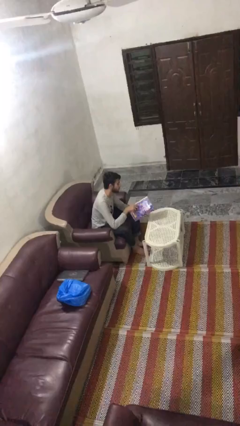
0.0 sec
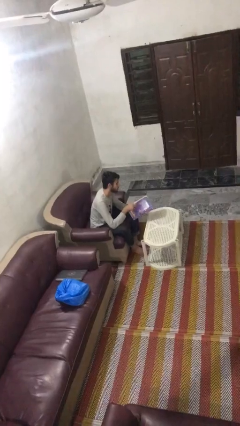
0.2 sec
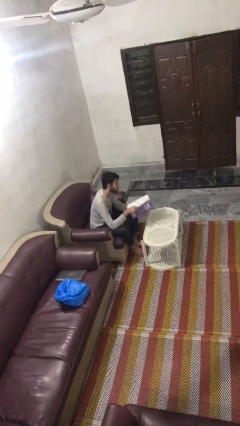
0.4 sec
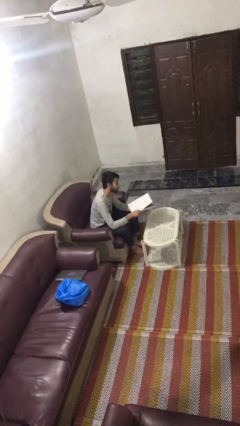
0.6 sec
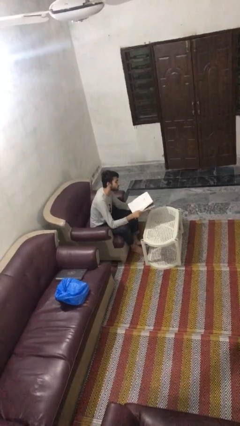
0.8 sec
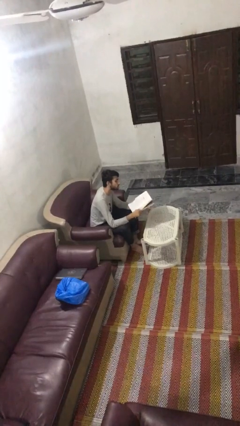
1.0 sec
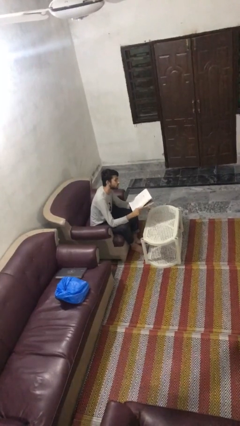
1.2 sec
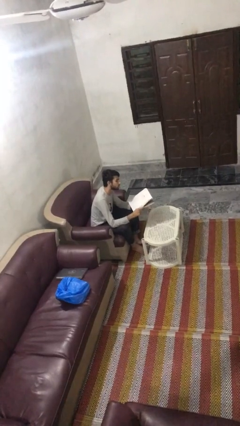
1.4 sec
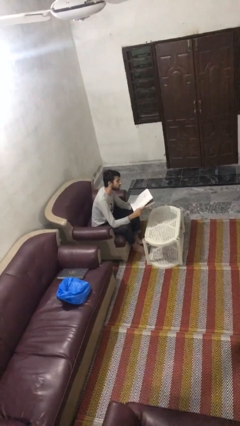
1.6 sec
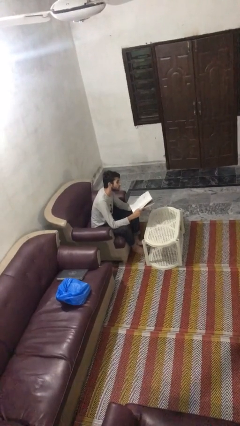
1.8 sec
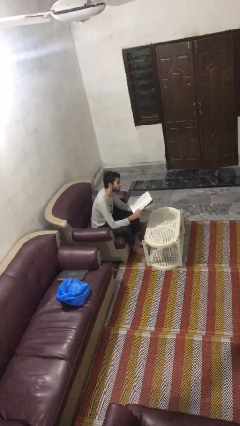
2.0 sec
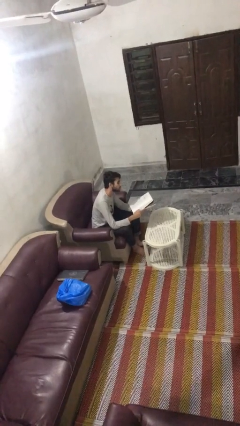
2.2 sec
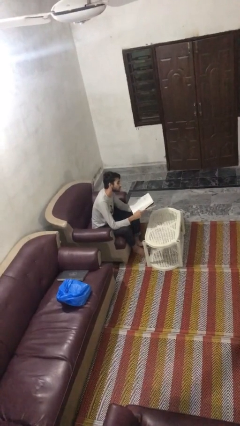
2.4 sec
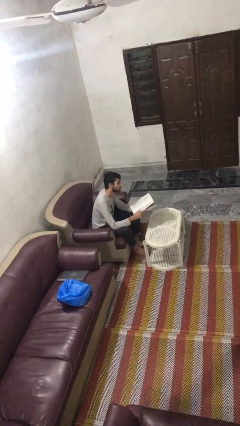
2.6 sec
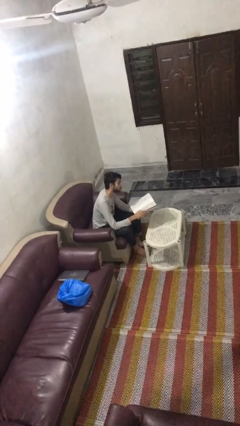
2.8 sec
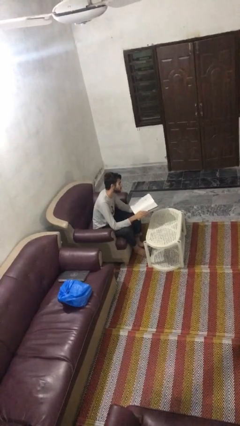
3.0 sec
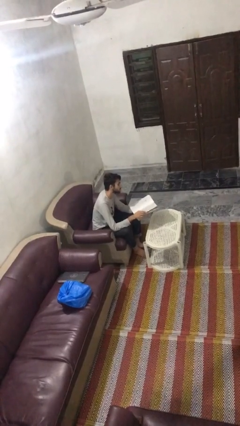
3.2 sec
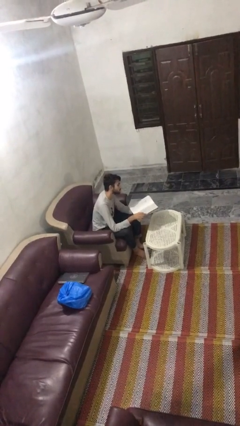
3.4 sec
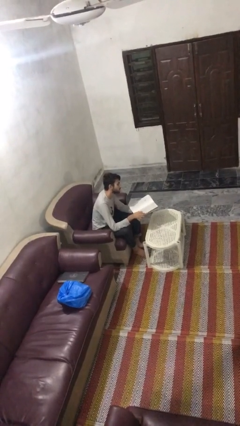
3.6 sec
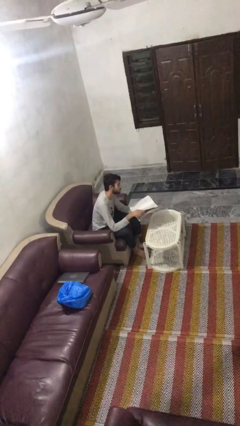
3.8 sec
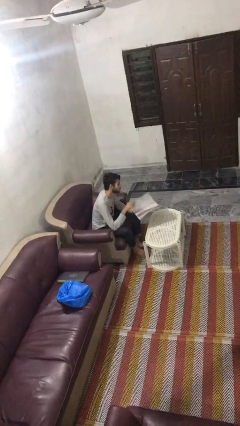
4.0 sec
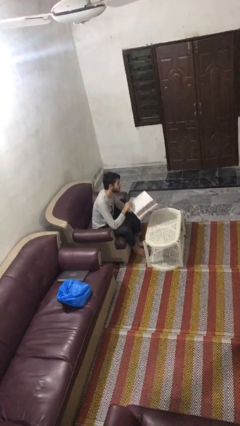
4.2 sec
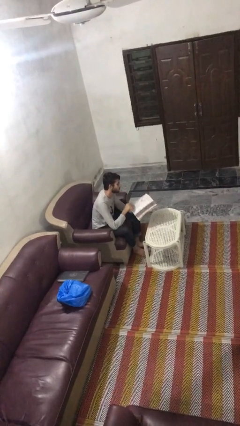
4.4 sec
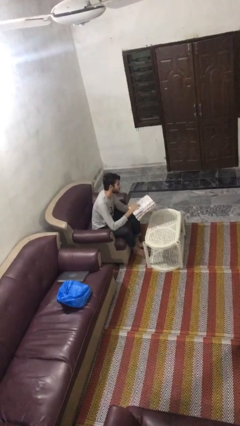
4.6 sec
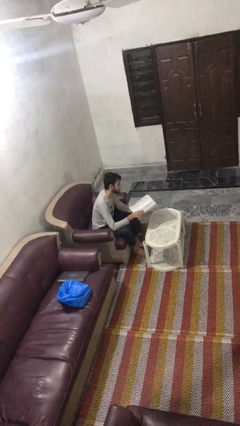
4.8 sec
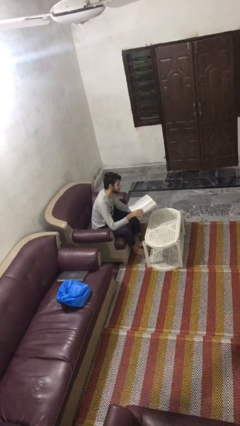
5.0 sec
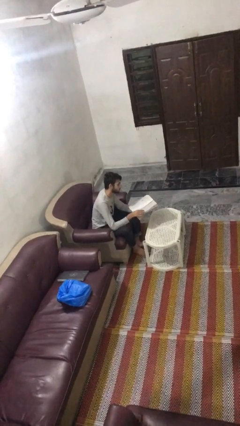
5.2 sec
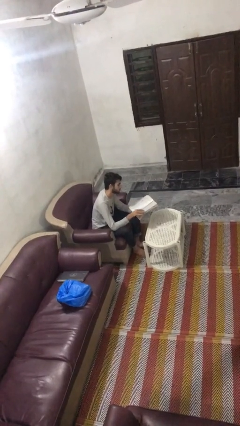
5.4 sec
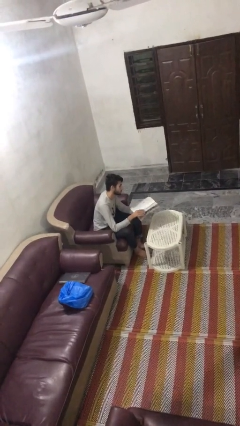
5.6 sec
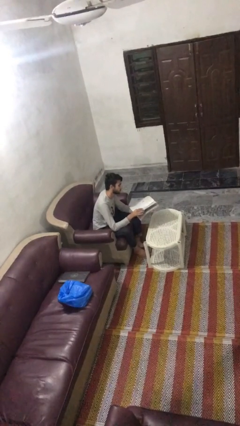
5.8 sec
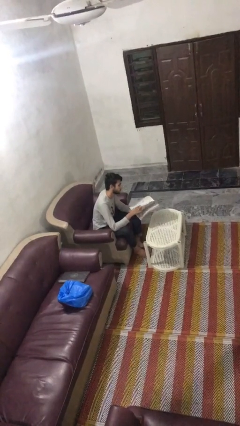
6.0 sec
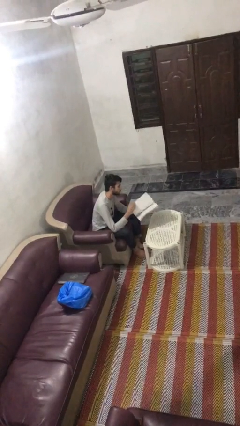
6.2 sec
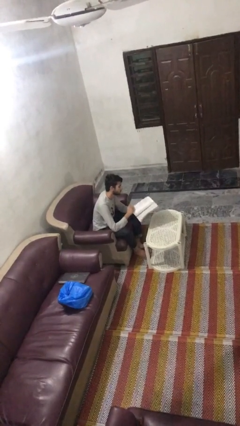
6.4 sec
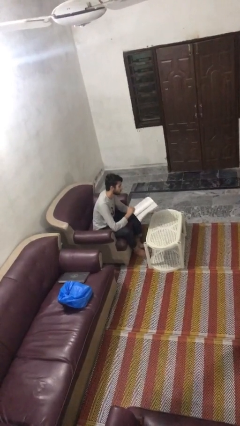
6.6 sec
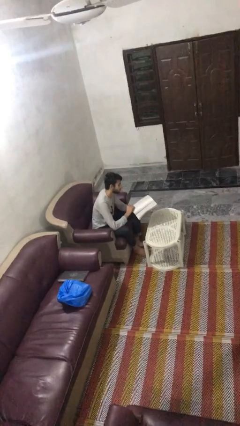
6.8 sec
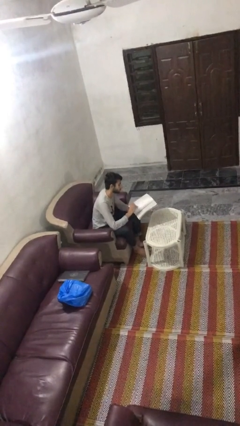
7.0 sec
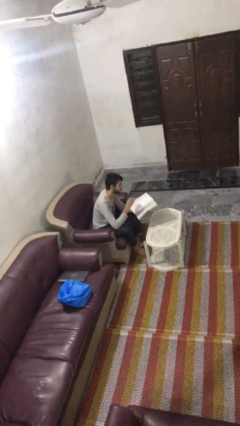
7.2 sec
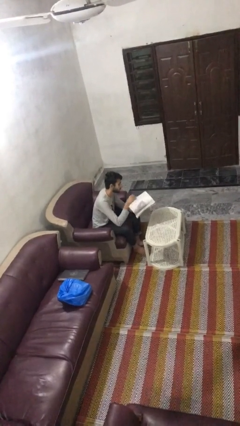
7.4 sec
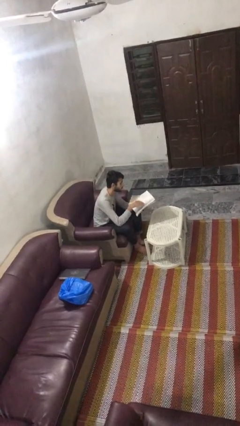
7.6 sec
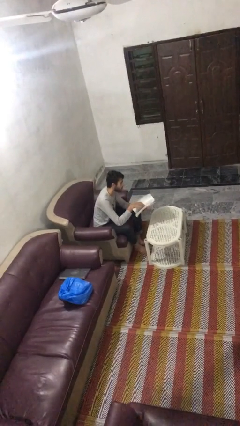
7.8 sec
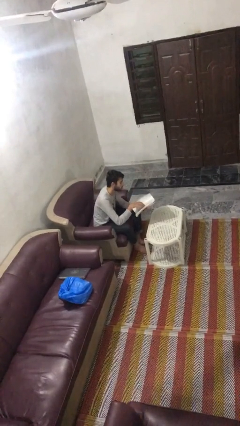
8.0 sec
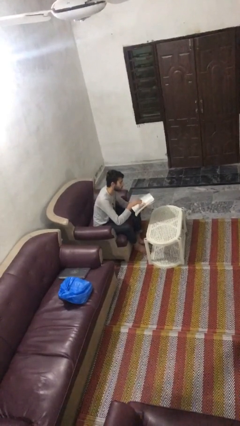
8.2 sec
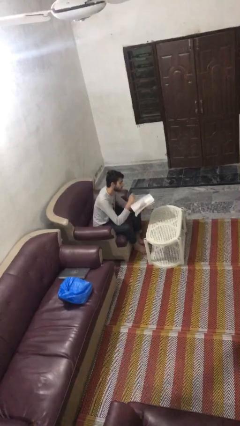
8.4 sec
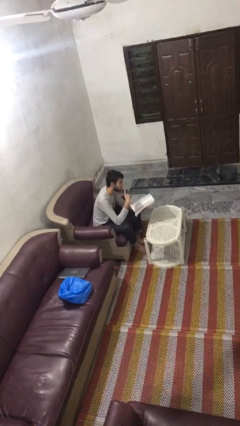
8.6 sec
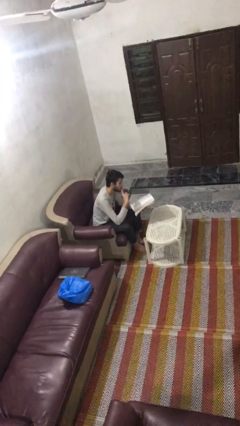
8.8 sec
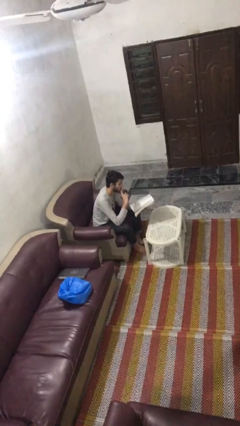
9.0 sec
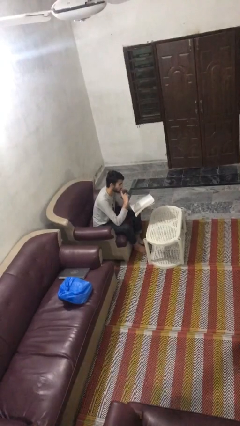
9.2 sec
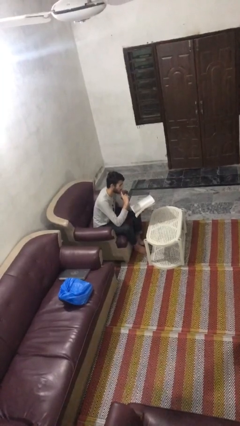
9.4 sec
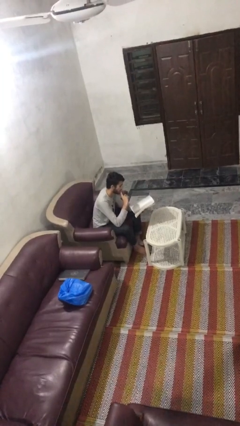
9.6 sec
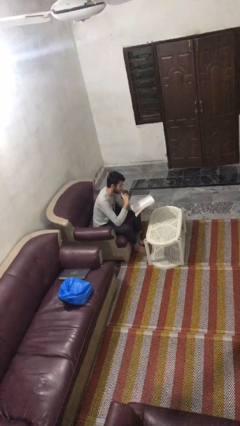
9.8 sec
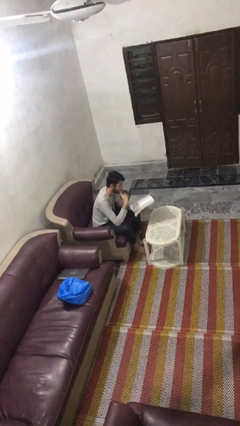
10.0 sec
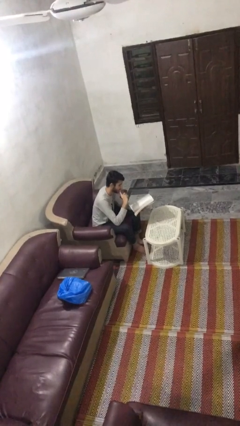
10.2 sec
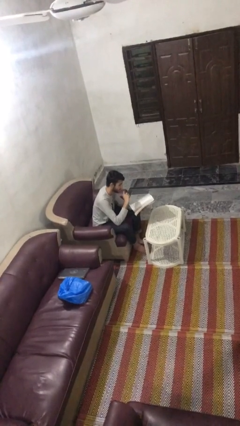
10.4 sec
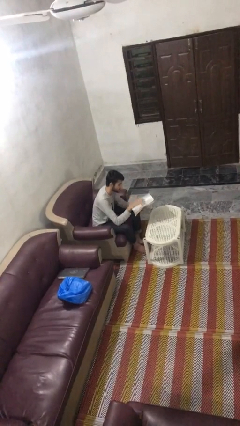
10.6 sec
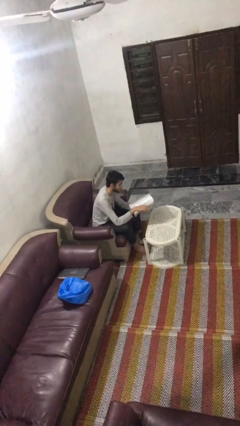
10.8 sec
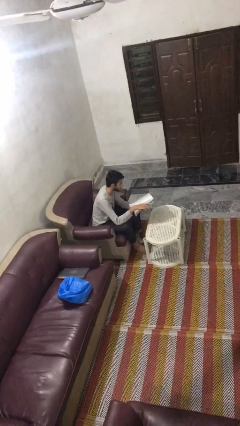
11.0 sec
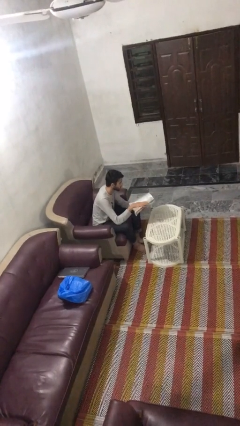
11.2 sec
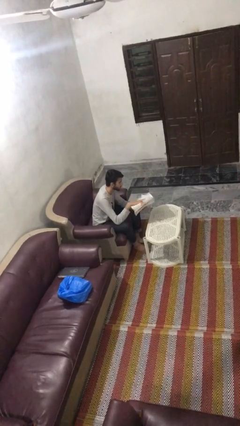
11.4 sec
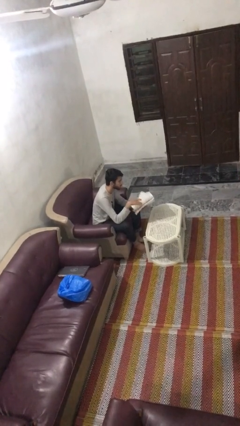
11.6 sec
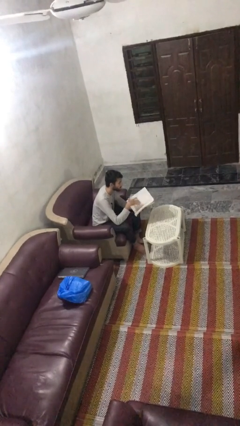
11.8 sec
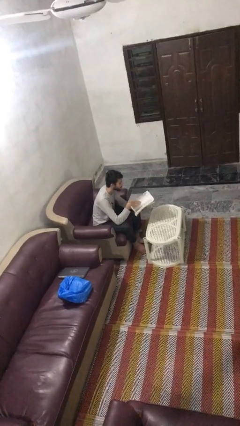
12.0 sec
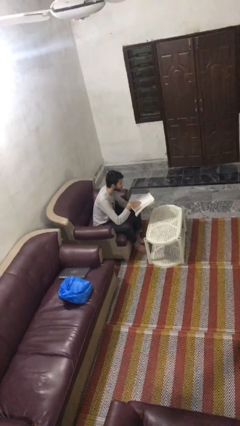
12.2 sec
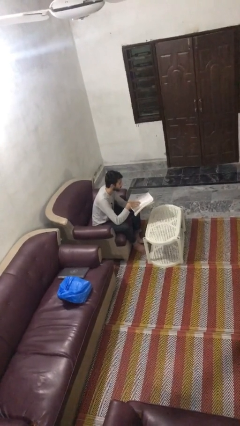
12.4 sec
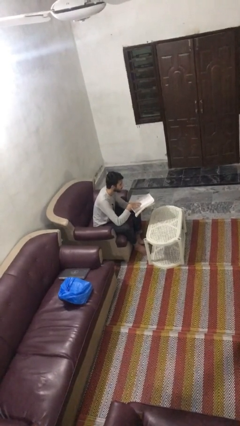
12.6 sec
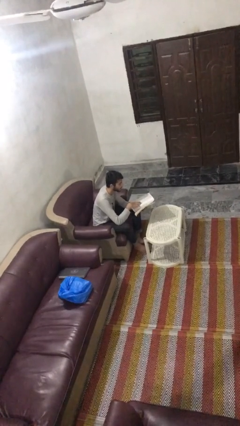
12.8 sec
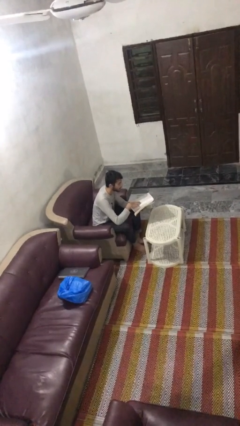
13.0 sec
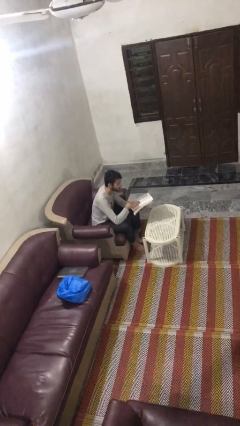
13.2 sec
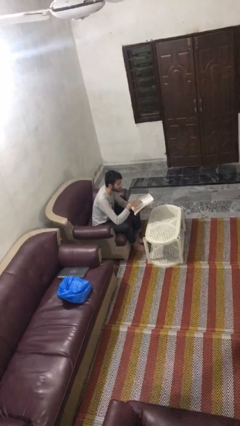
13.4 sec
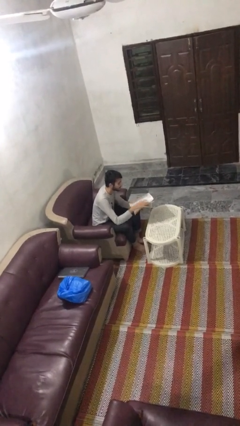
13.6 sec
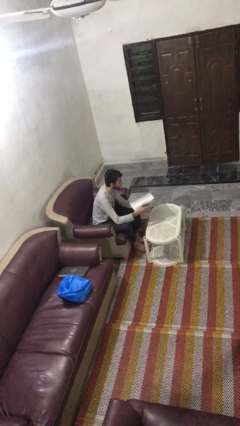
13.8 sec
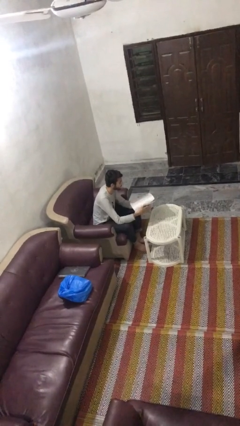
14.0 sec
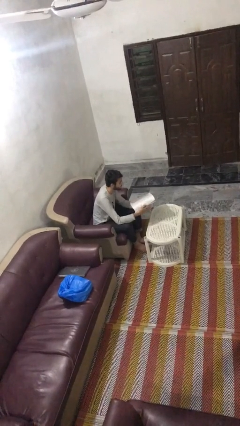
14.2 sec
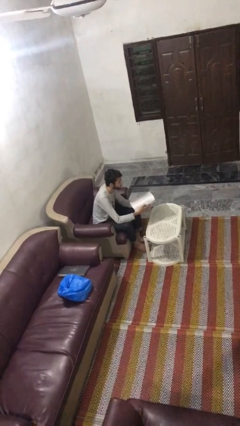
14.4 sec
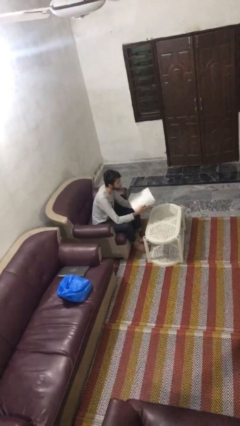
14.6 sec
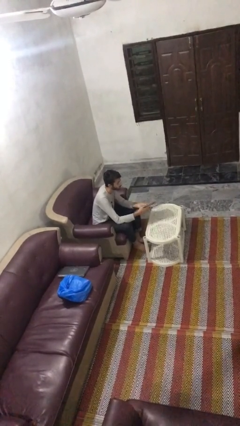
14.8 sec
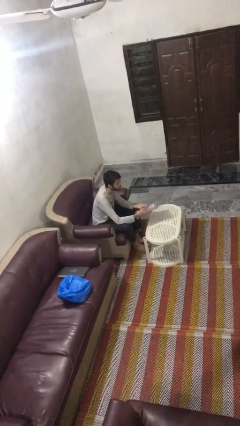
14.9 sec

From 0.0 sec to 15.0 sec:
person reads document

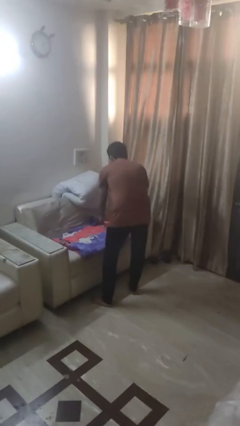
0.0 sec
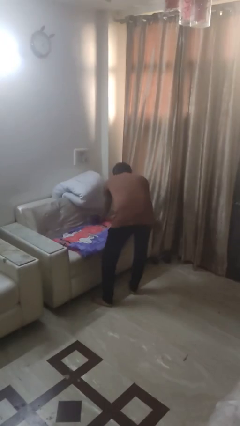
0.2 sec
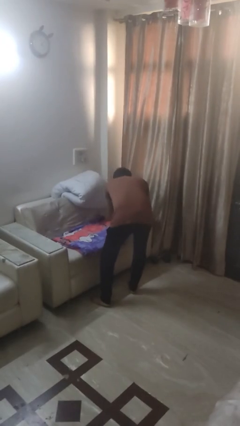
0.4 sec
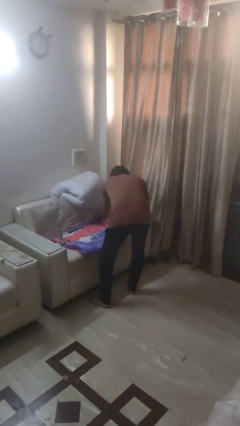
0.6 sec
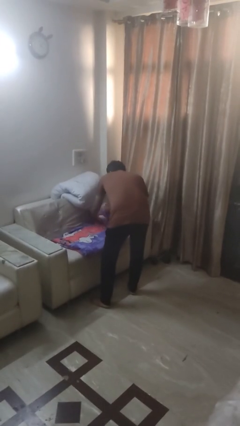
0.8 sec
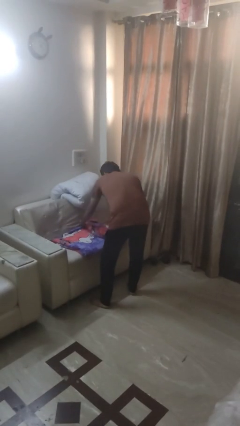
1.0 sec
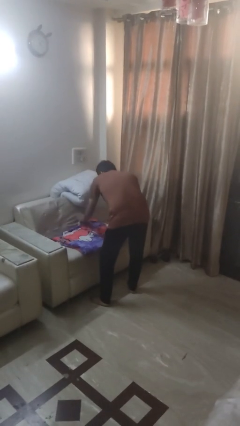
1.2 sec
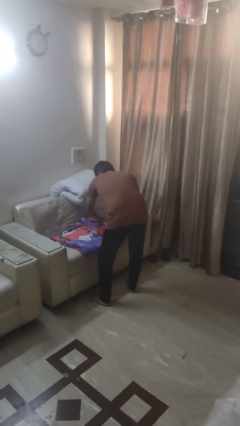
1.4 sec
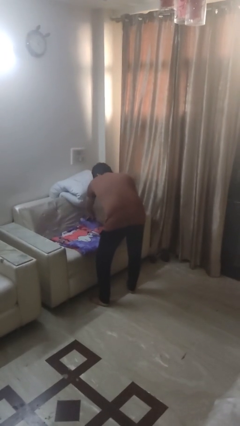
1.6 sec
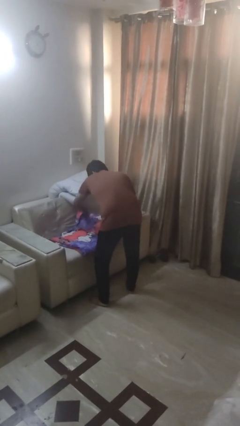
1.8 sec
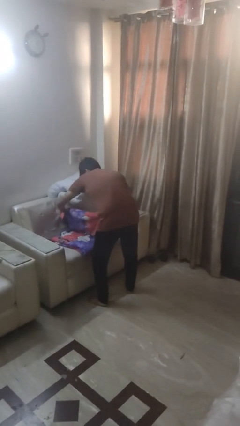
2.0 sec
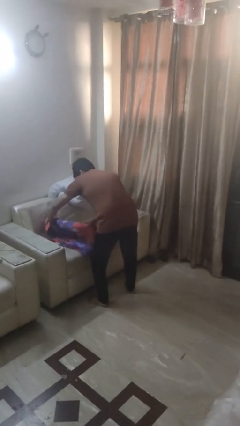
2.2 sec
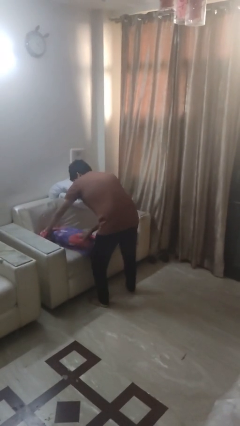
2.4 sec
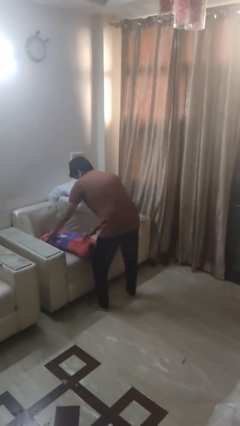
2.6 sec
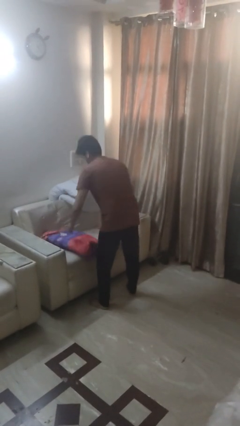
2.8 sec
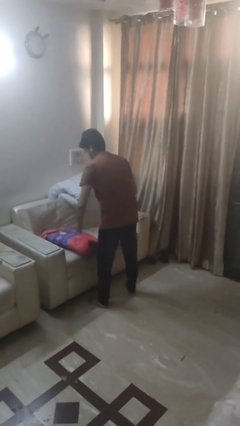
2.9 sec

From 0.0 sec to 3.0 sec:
person folds blanket

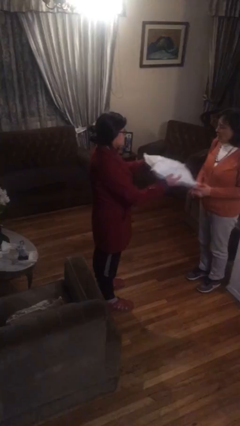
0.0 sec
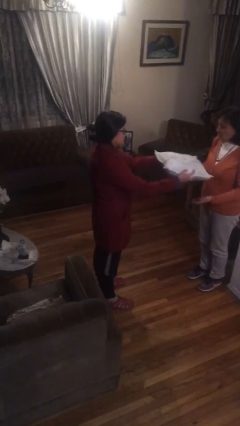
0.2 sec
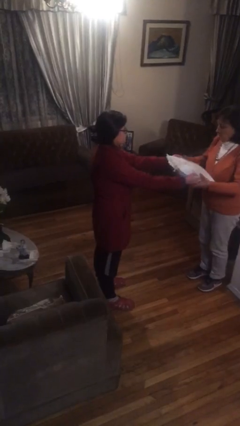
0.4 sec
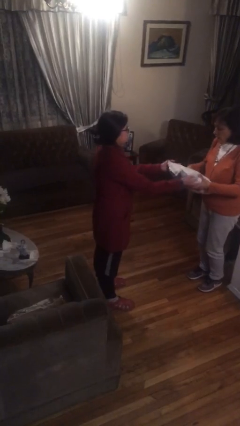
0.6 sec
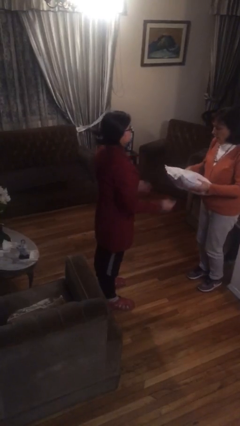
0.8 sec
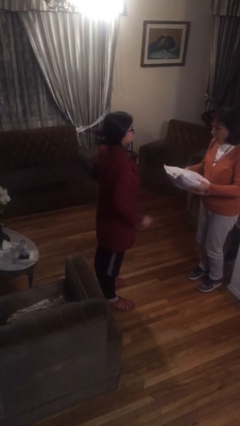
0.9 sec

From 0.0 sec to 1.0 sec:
person transfers object to person
